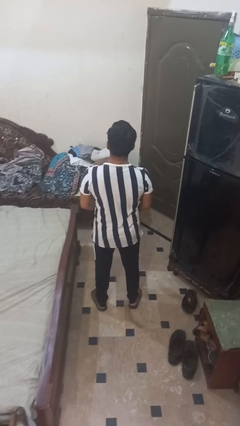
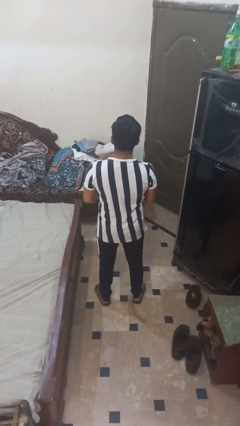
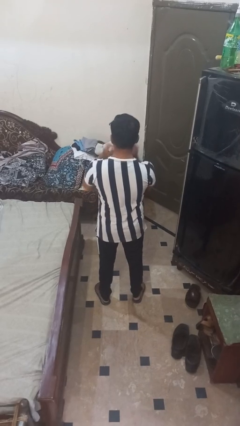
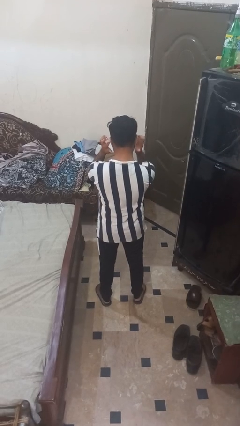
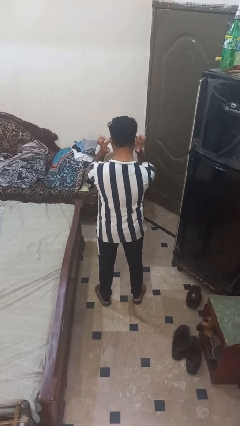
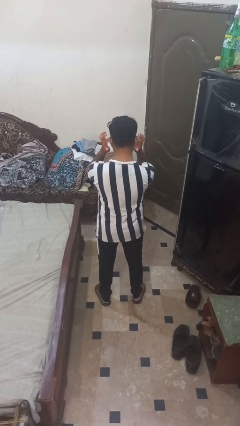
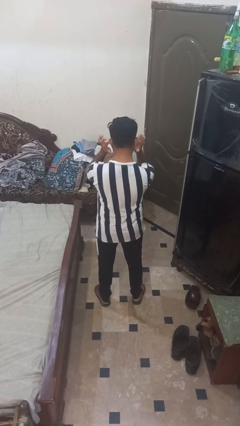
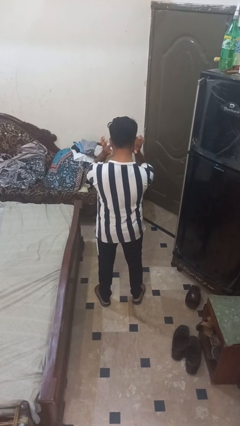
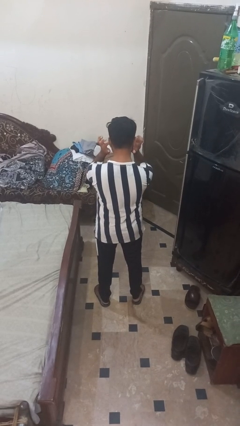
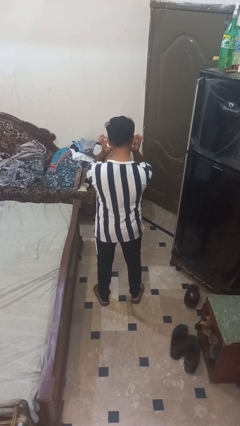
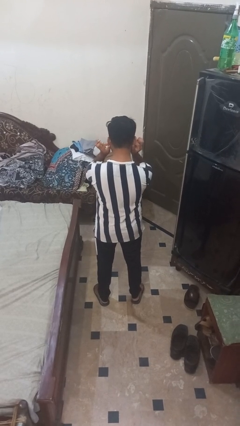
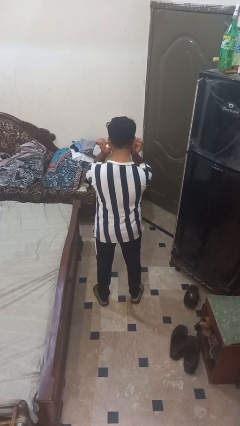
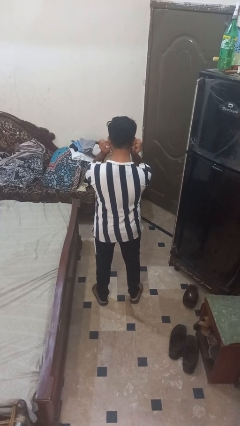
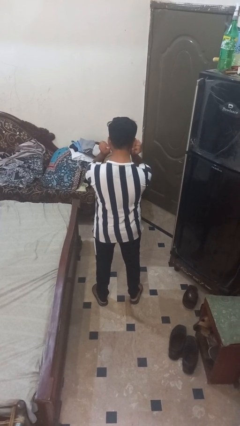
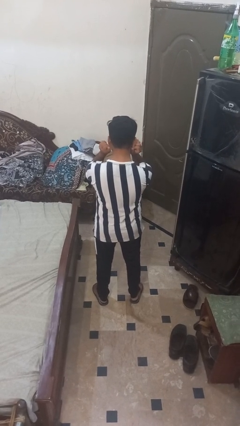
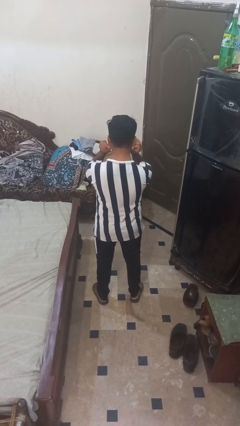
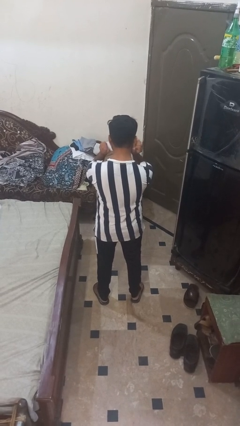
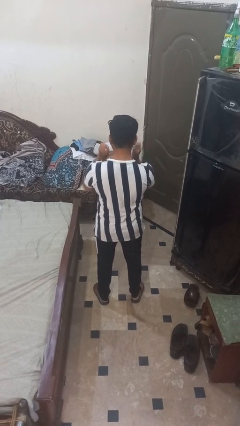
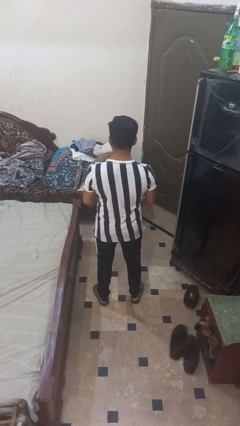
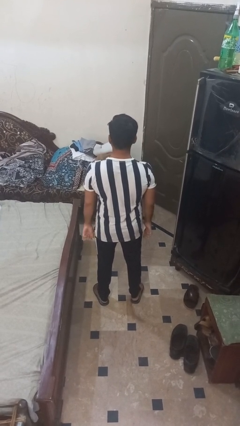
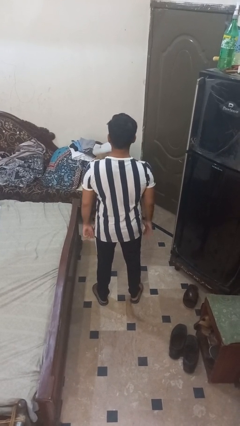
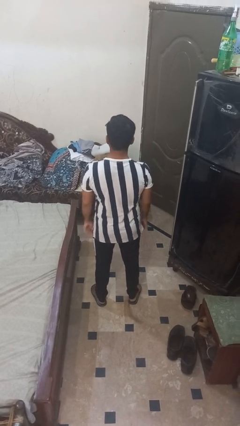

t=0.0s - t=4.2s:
person touches earlobe

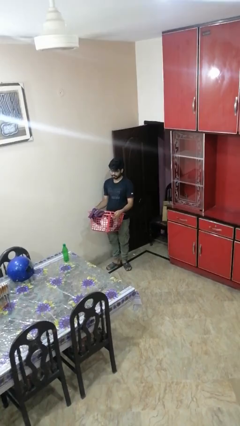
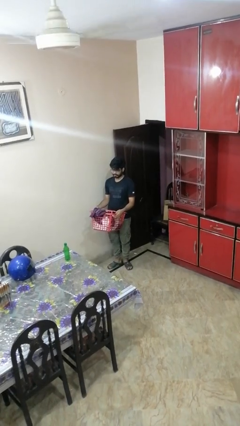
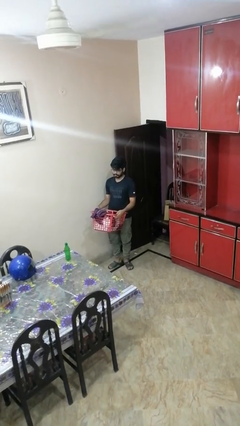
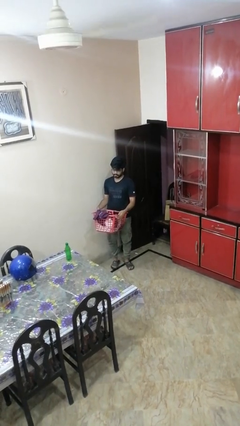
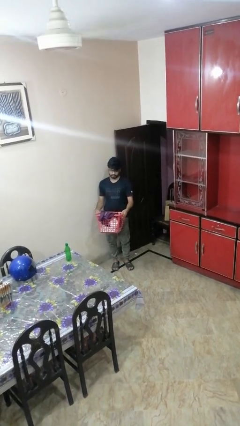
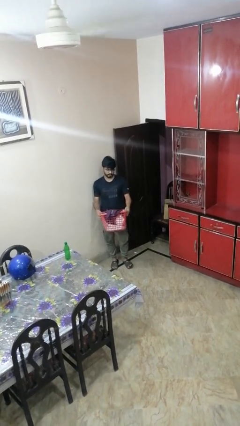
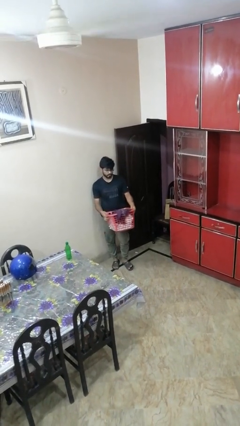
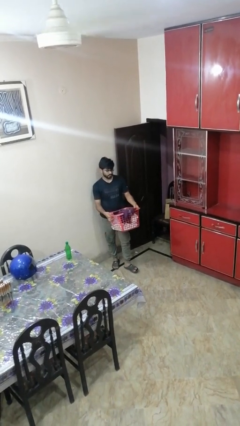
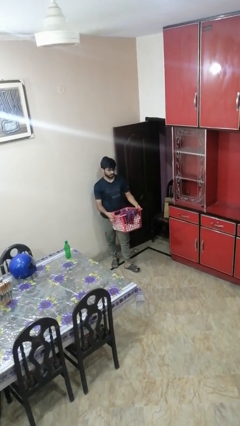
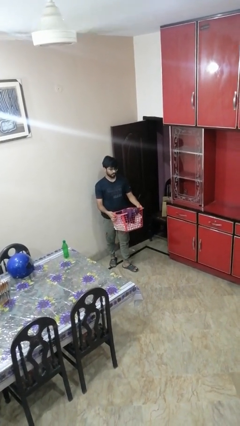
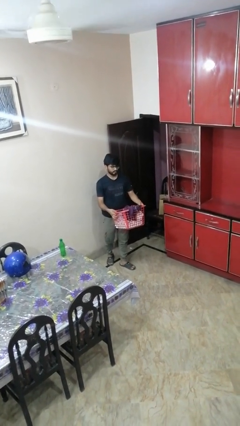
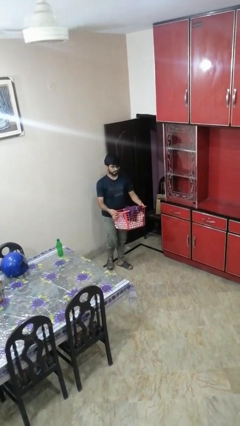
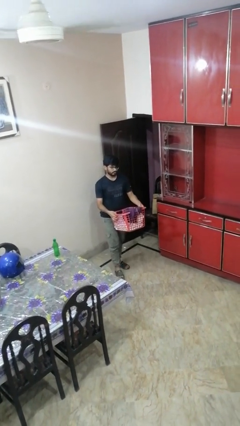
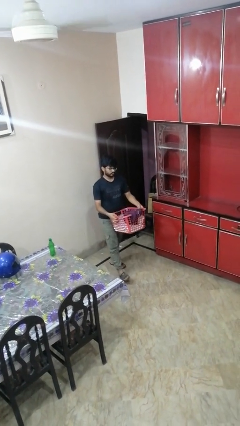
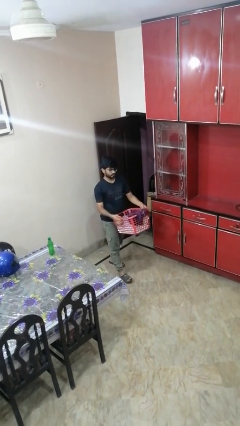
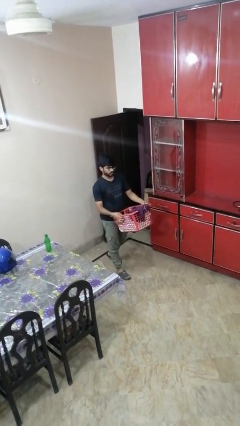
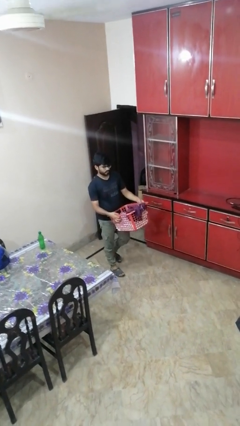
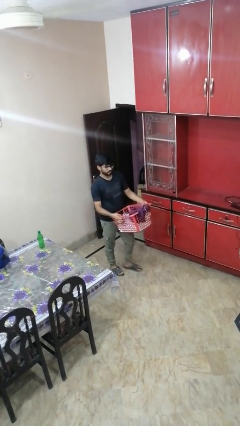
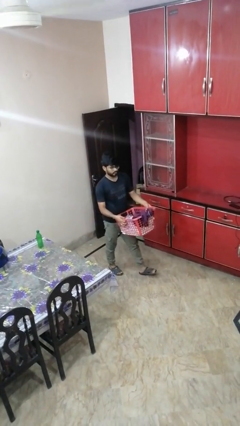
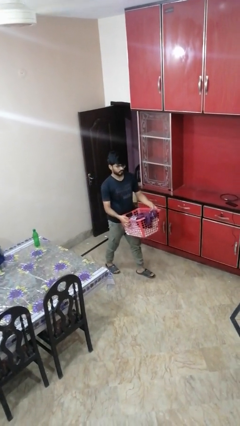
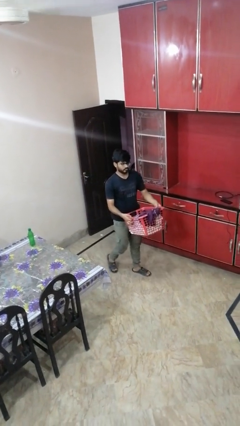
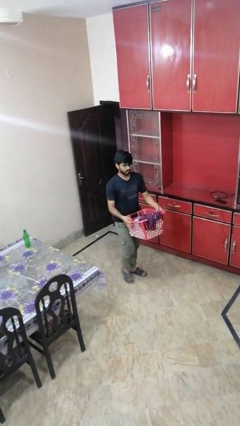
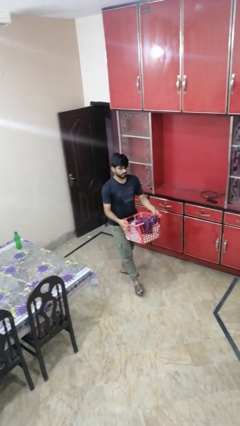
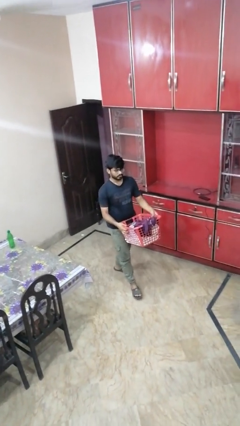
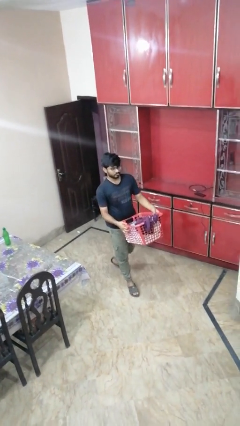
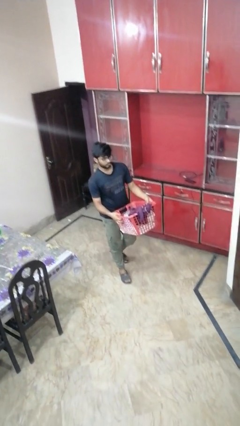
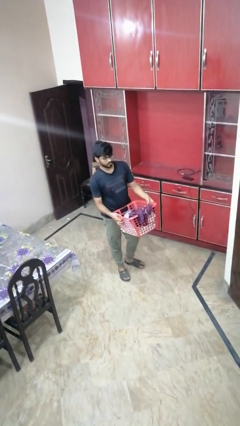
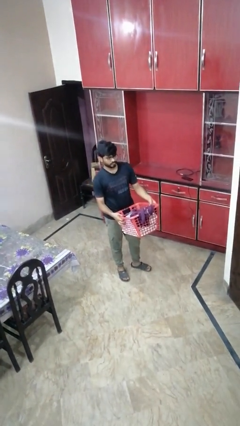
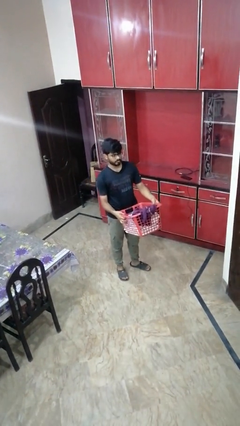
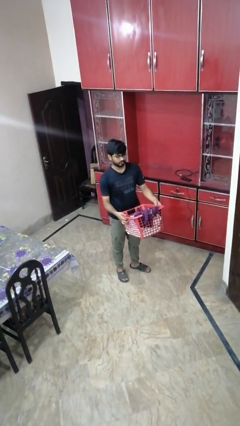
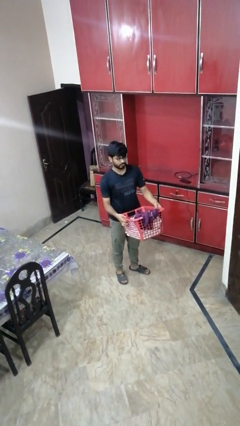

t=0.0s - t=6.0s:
person carries laundry basket

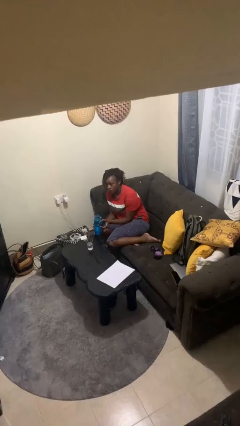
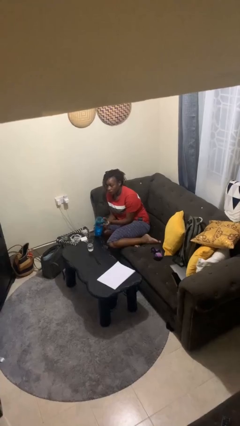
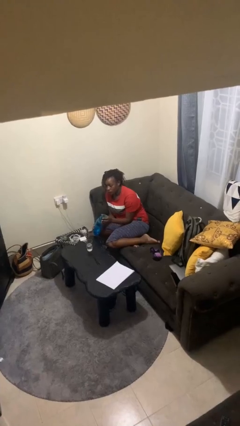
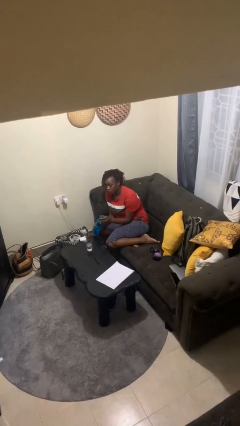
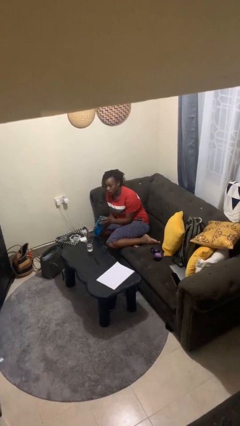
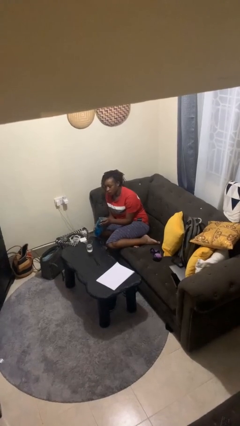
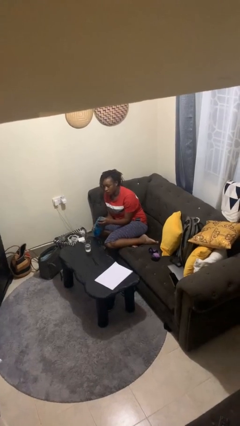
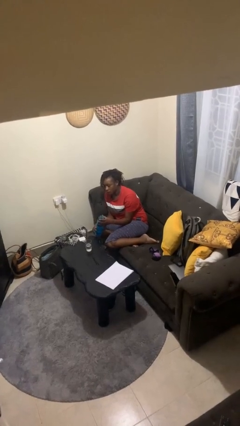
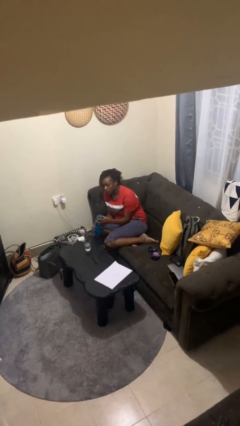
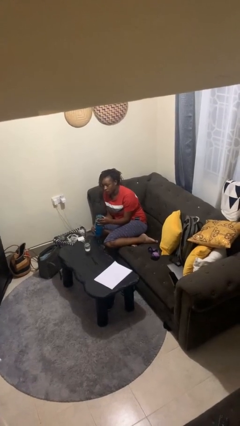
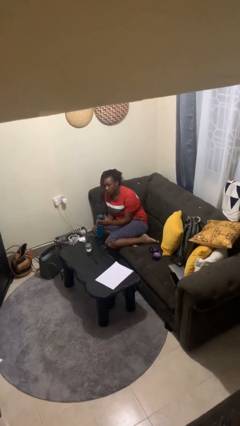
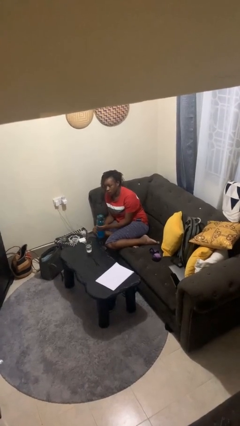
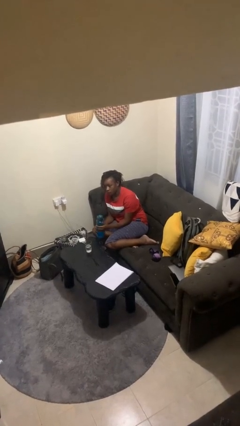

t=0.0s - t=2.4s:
person screws lid to bottle

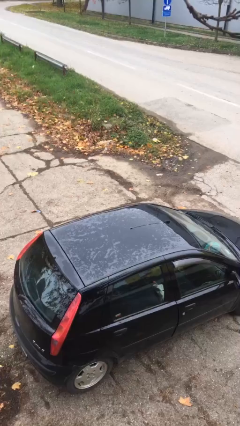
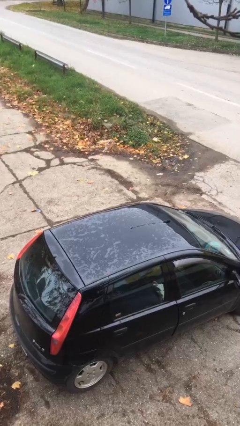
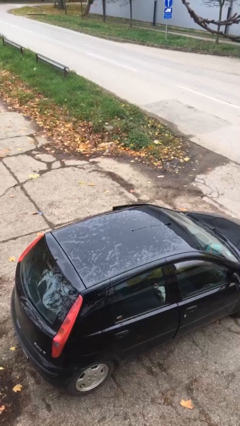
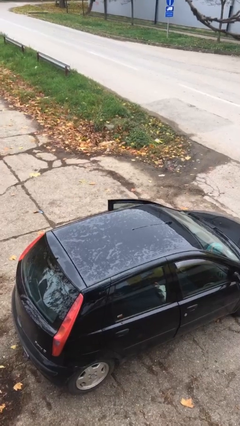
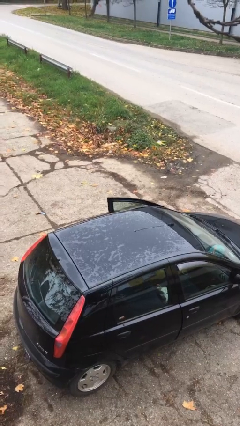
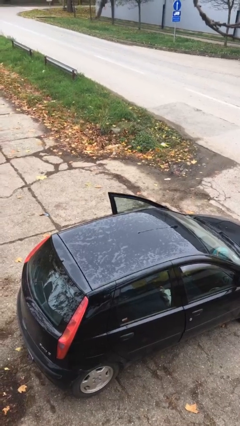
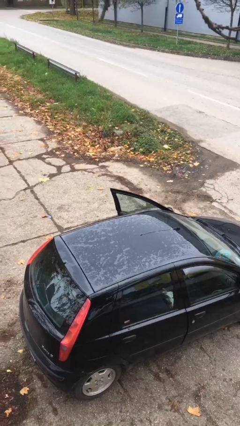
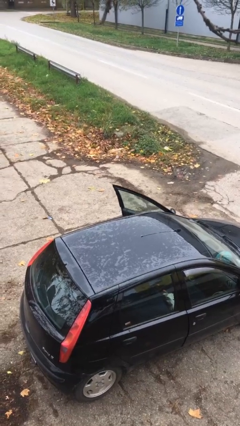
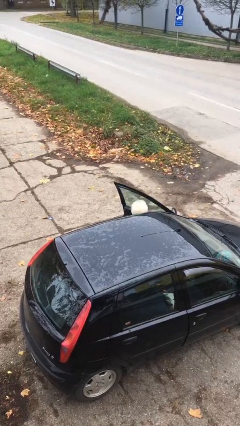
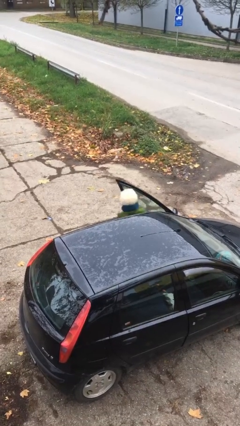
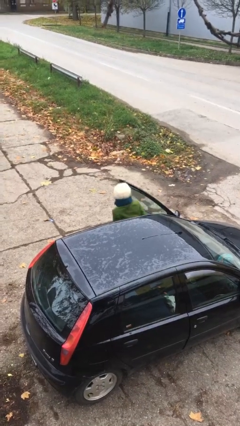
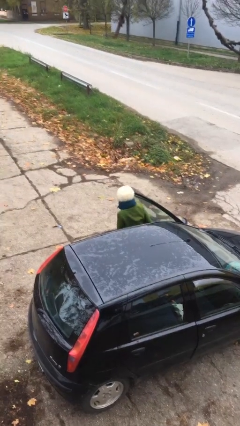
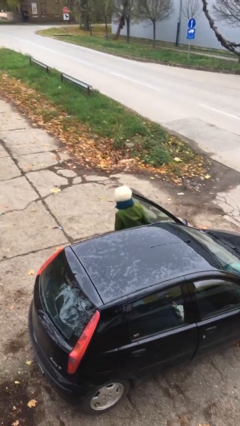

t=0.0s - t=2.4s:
person exits car

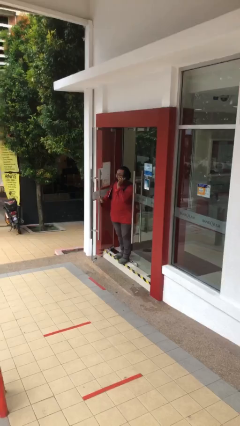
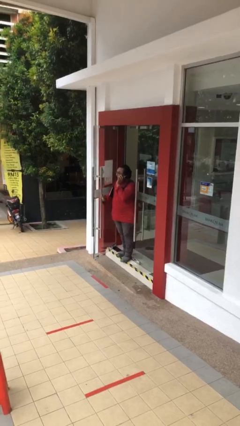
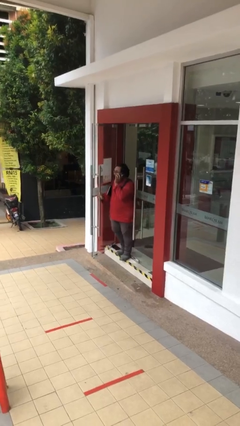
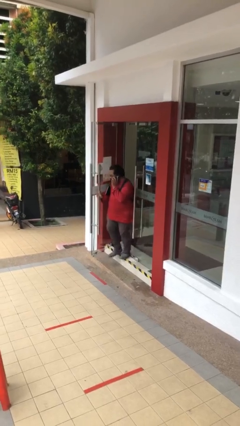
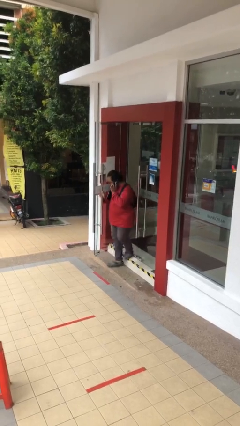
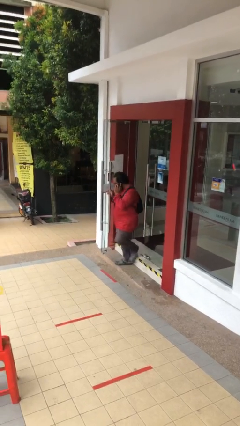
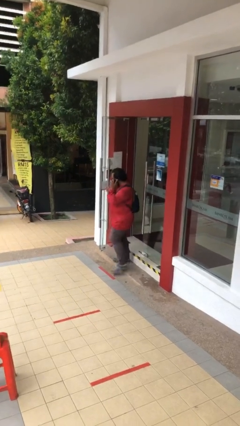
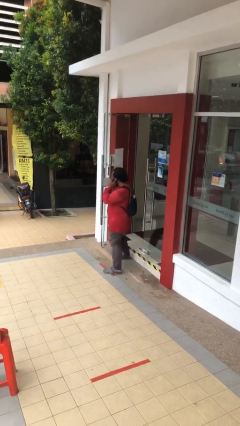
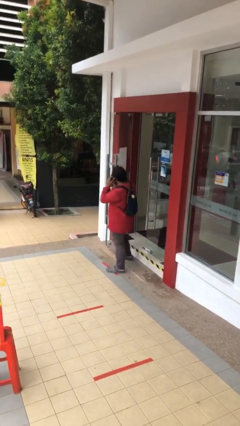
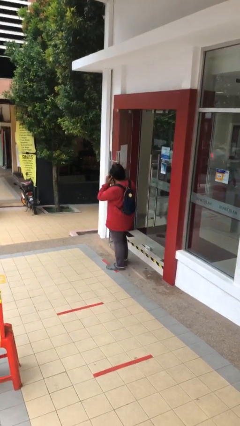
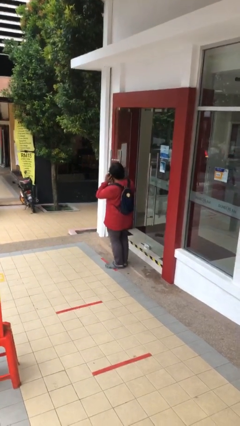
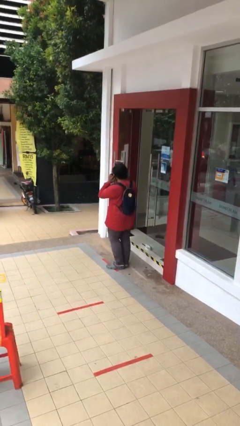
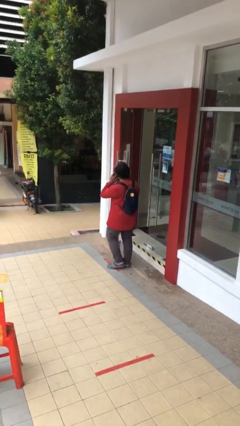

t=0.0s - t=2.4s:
person enters scene through structure
